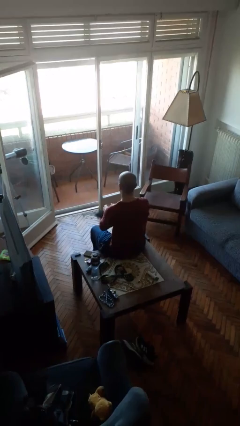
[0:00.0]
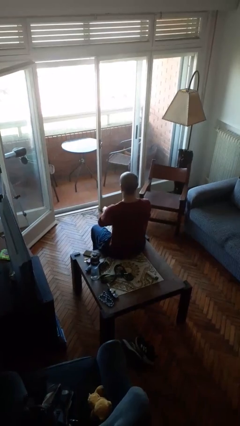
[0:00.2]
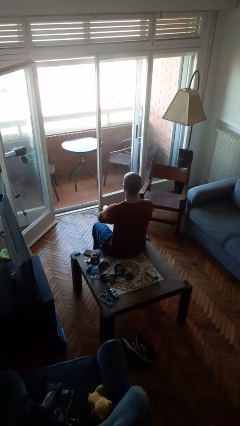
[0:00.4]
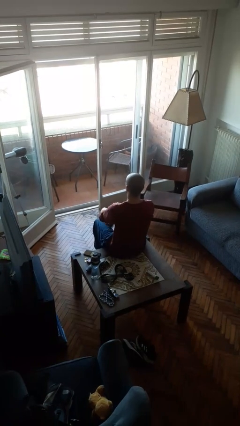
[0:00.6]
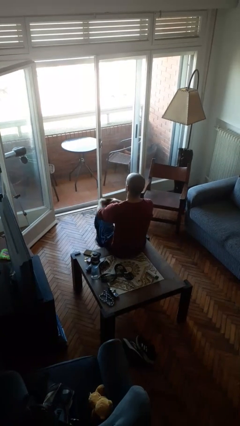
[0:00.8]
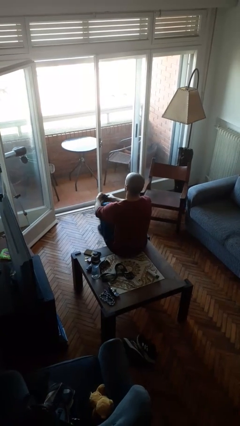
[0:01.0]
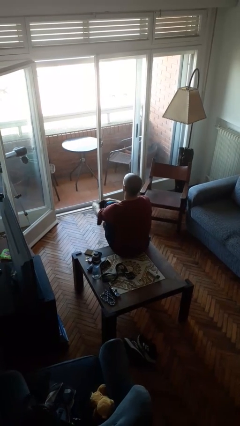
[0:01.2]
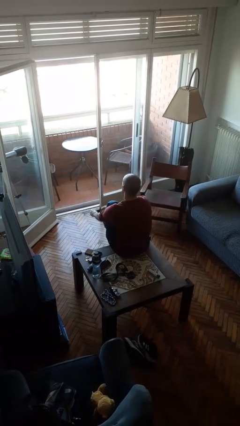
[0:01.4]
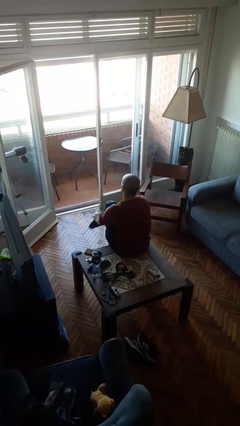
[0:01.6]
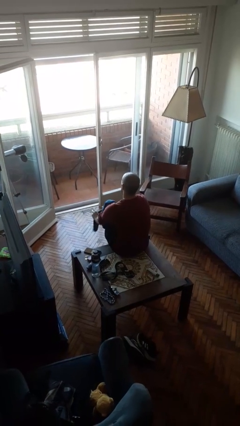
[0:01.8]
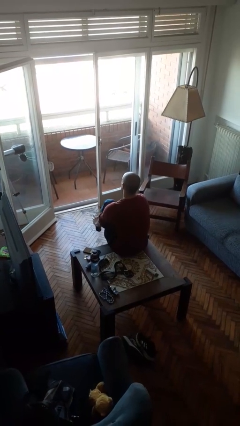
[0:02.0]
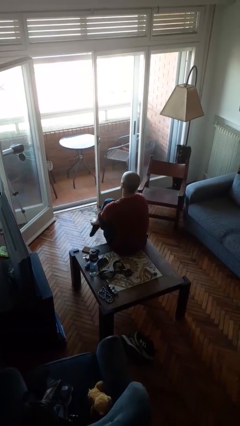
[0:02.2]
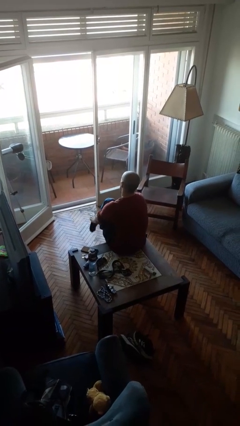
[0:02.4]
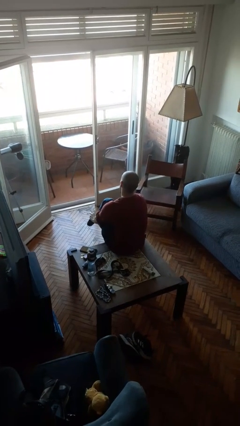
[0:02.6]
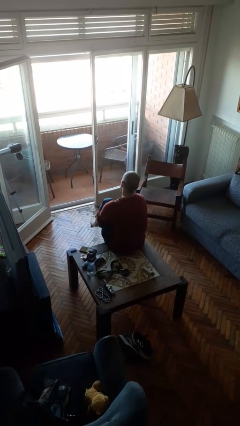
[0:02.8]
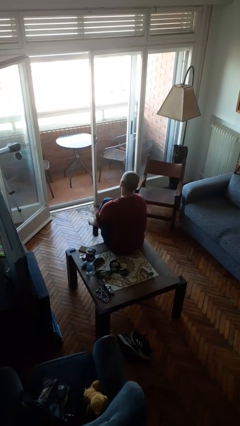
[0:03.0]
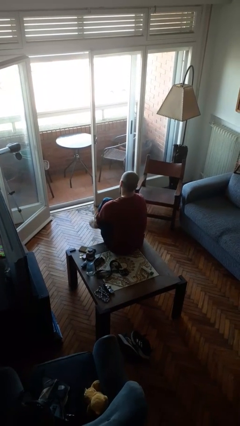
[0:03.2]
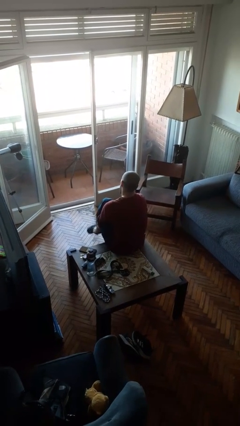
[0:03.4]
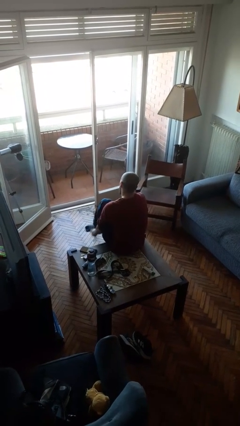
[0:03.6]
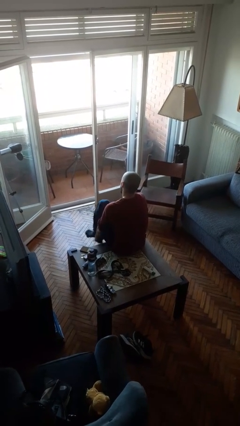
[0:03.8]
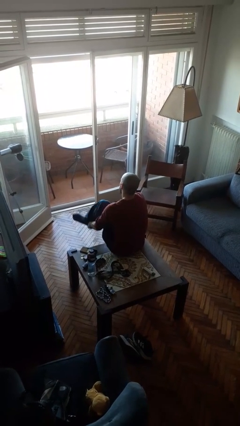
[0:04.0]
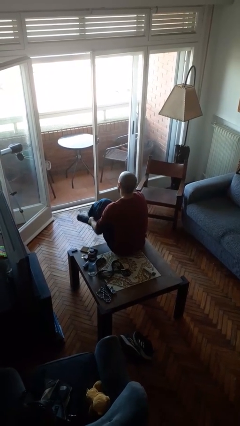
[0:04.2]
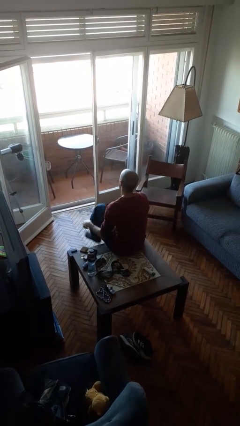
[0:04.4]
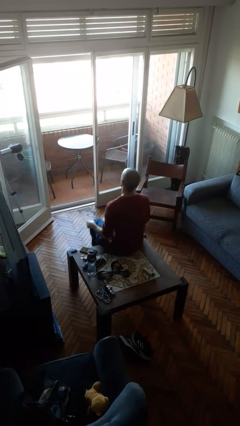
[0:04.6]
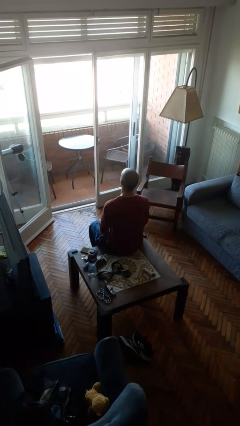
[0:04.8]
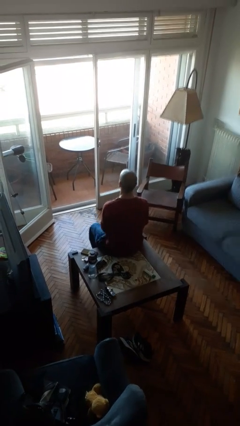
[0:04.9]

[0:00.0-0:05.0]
person puts on socks

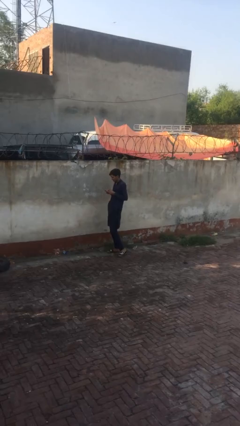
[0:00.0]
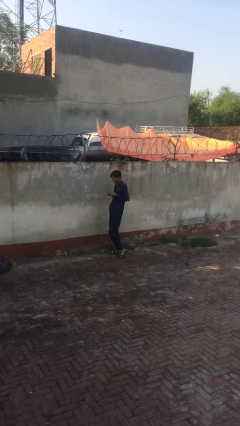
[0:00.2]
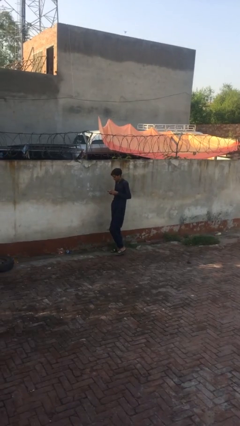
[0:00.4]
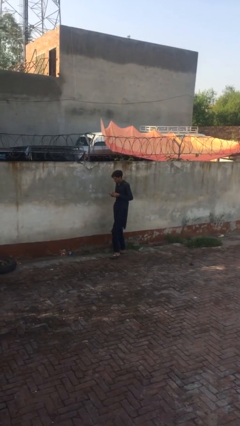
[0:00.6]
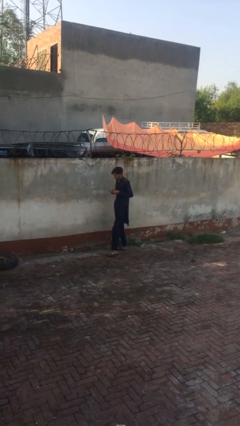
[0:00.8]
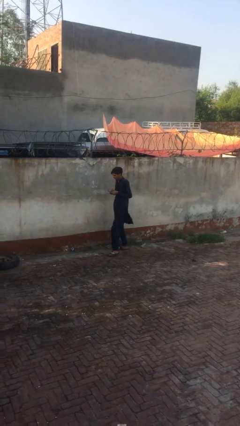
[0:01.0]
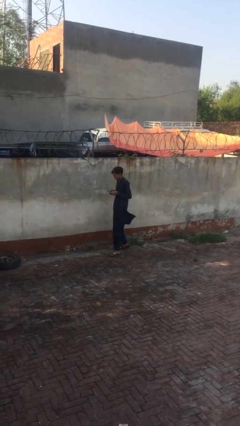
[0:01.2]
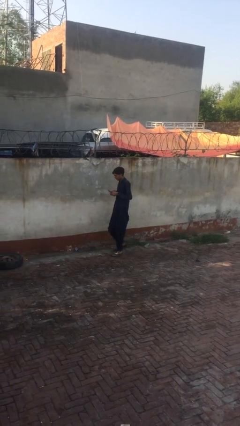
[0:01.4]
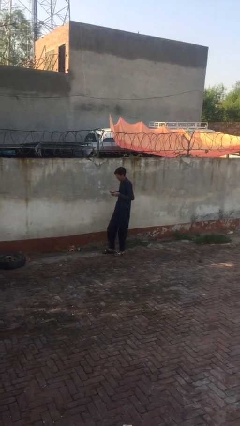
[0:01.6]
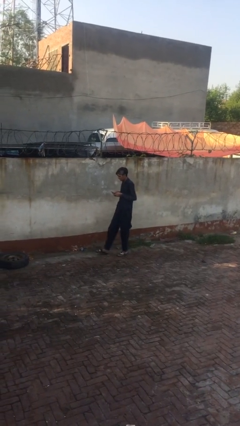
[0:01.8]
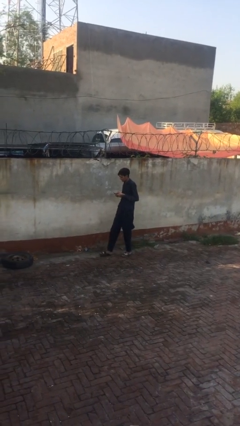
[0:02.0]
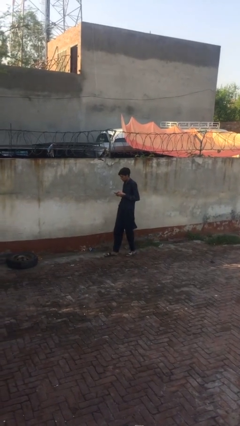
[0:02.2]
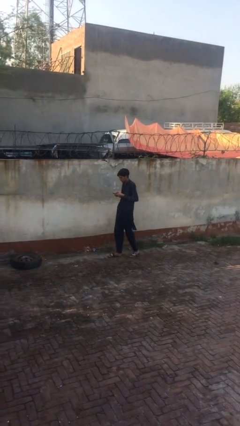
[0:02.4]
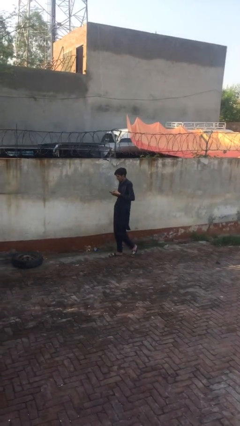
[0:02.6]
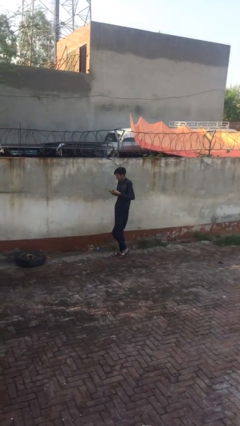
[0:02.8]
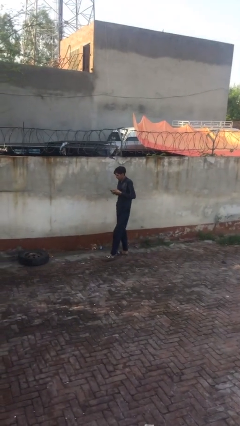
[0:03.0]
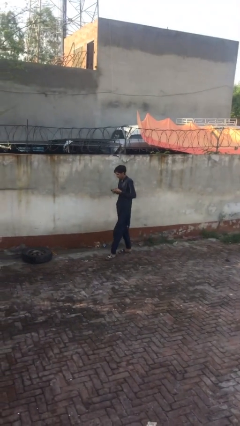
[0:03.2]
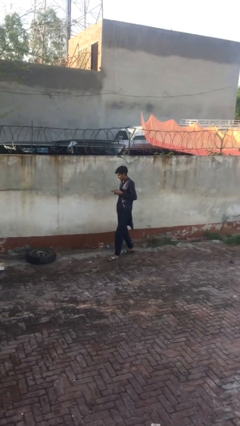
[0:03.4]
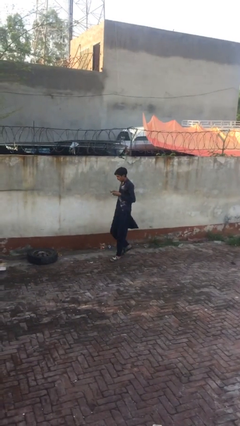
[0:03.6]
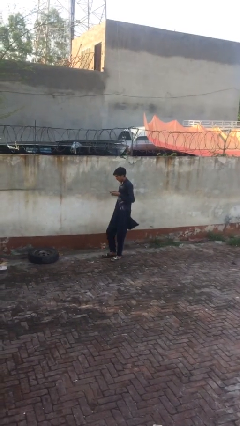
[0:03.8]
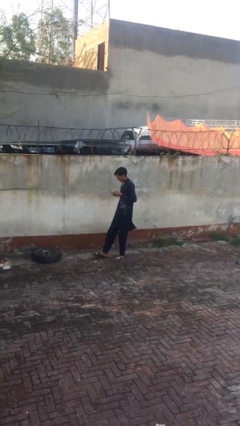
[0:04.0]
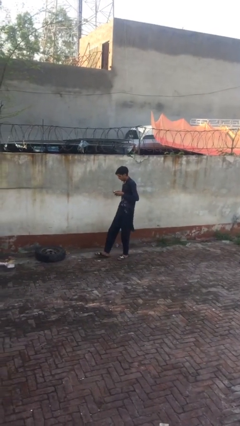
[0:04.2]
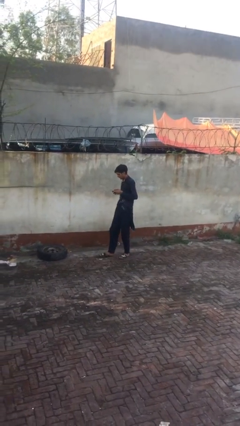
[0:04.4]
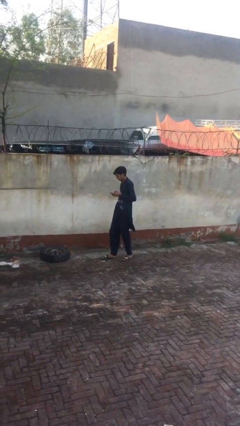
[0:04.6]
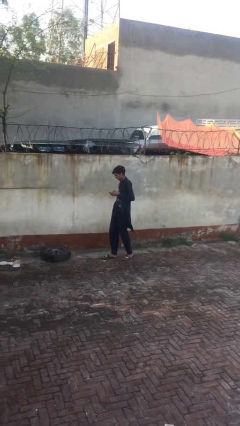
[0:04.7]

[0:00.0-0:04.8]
person texts on phone

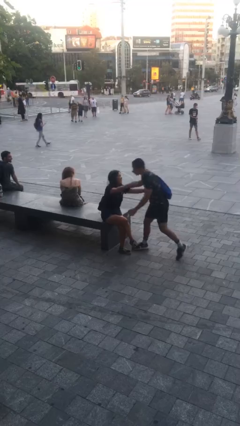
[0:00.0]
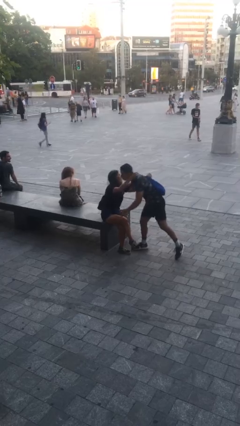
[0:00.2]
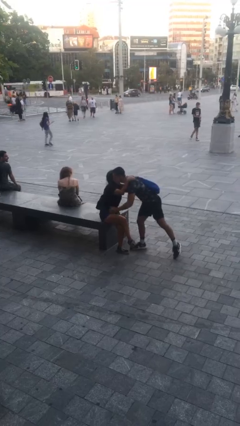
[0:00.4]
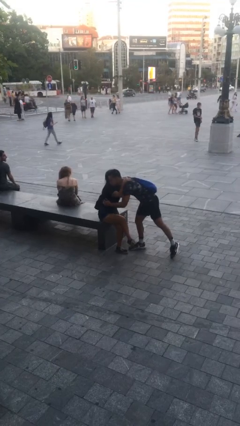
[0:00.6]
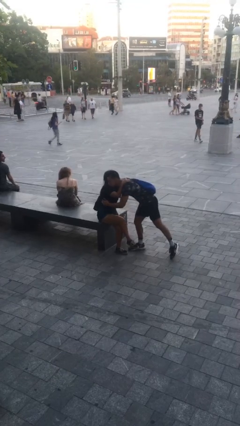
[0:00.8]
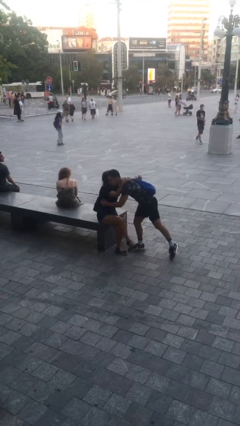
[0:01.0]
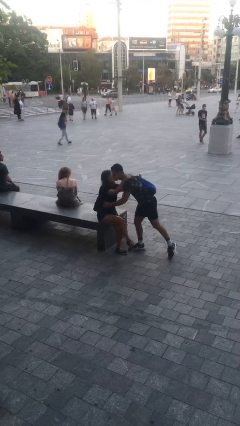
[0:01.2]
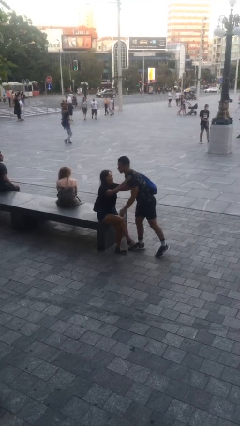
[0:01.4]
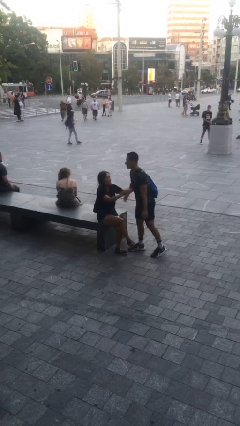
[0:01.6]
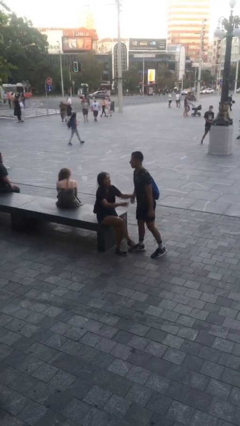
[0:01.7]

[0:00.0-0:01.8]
person embraces person

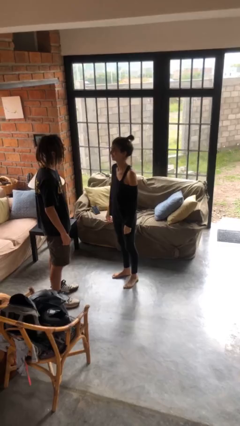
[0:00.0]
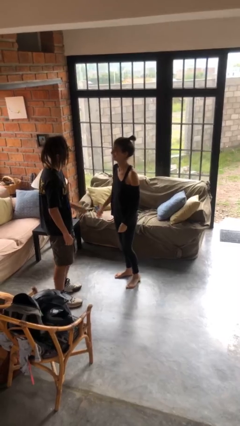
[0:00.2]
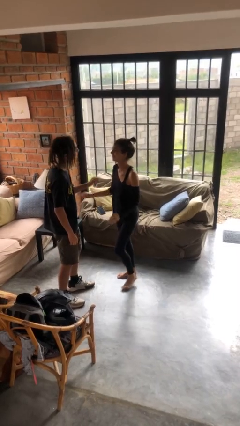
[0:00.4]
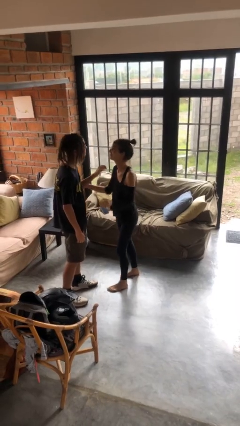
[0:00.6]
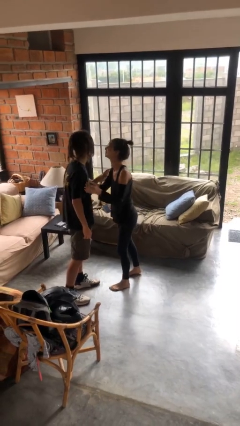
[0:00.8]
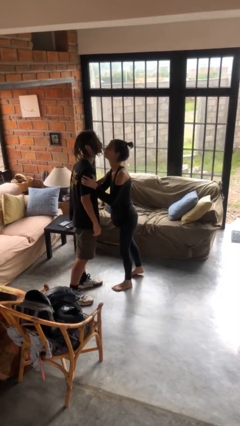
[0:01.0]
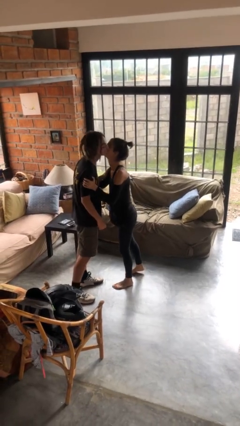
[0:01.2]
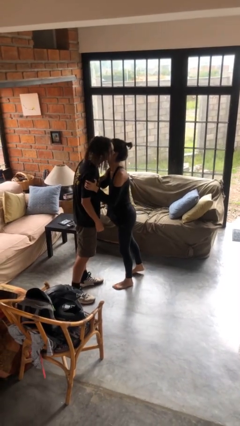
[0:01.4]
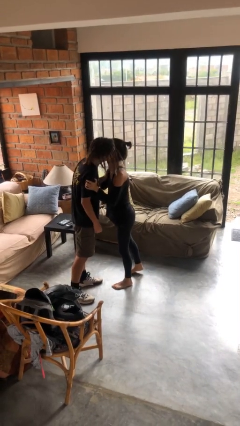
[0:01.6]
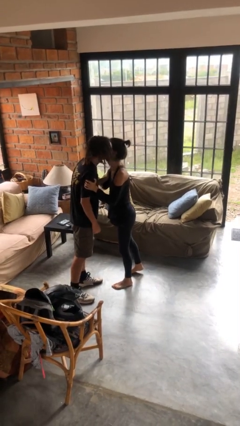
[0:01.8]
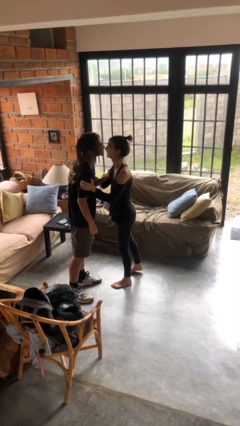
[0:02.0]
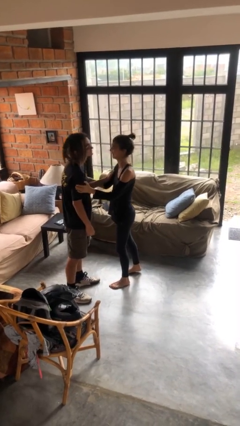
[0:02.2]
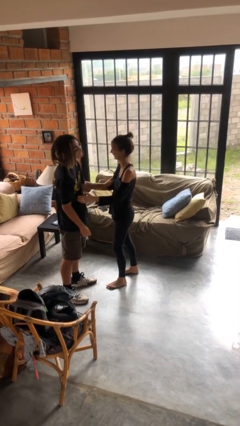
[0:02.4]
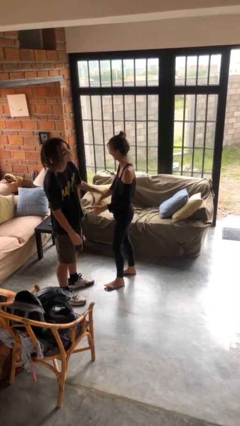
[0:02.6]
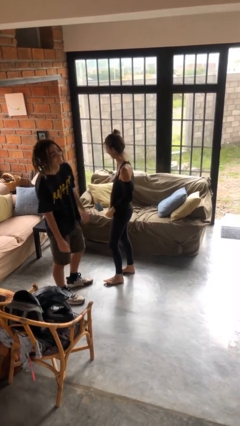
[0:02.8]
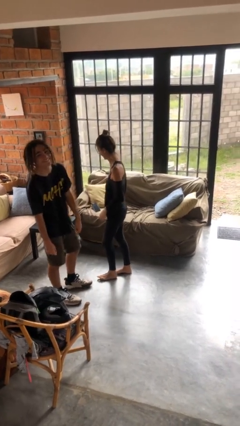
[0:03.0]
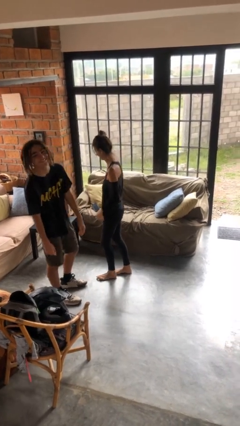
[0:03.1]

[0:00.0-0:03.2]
person kisses cheek of person

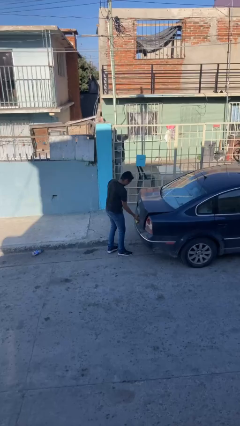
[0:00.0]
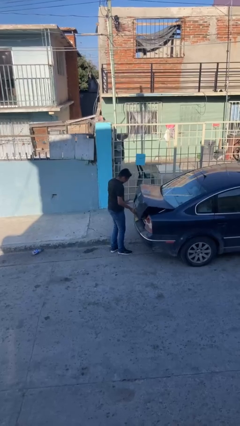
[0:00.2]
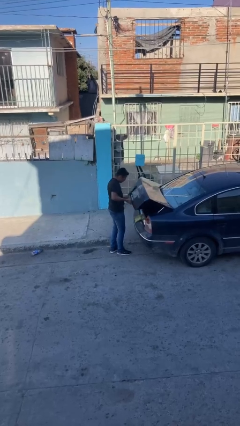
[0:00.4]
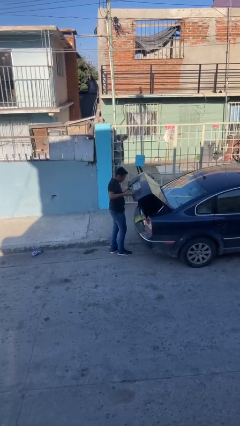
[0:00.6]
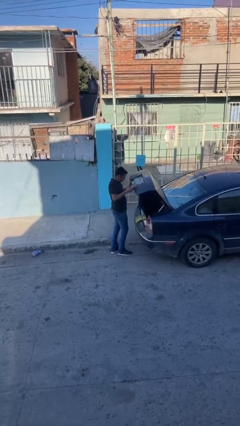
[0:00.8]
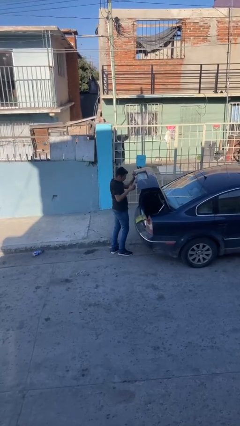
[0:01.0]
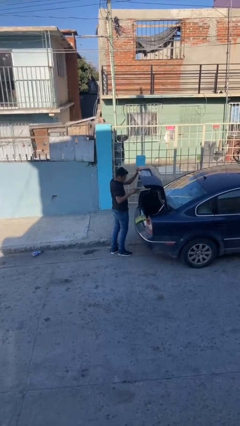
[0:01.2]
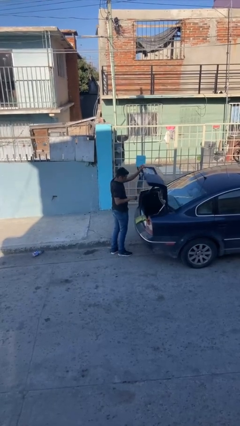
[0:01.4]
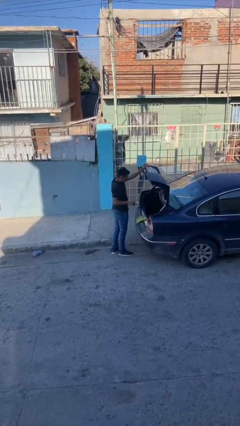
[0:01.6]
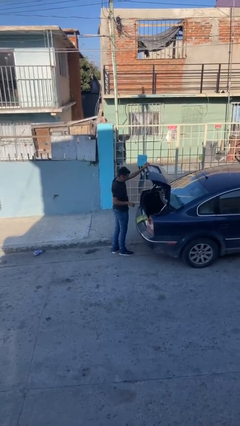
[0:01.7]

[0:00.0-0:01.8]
person opens car trunk

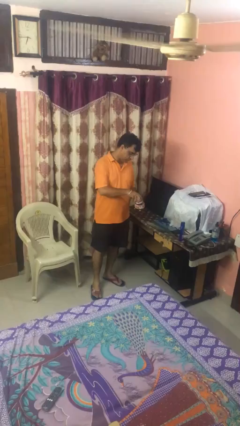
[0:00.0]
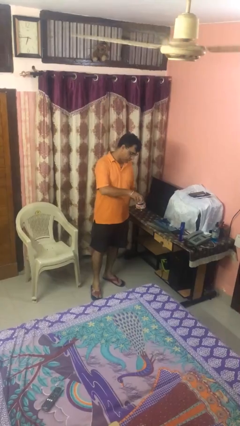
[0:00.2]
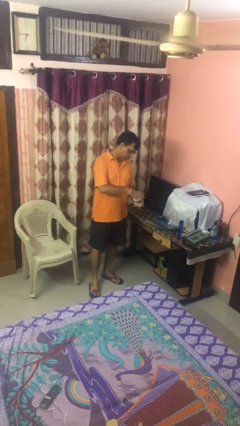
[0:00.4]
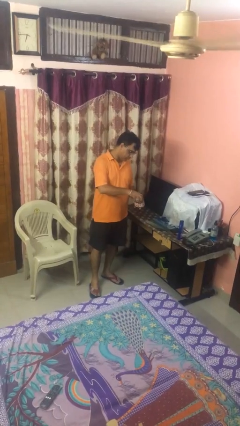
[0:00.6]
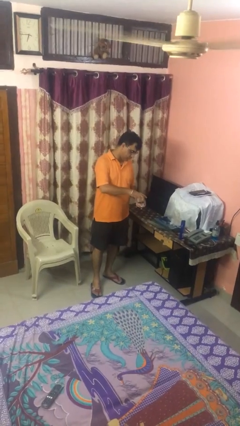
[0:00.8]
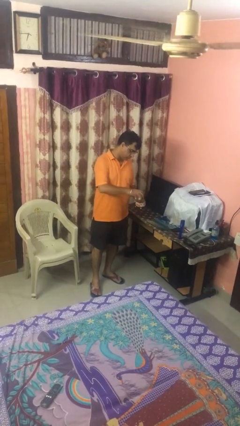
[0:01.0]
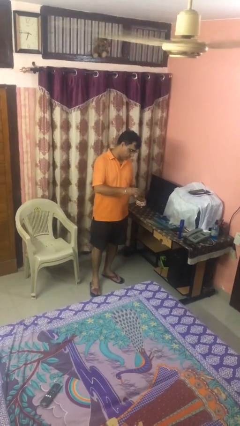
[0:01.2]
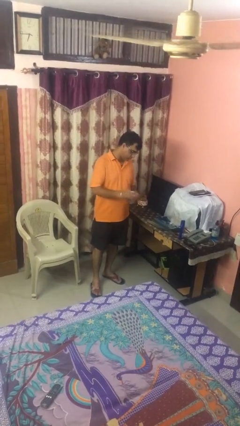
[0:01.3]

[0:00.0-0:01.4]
person opens jar
